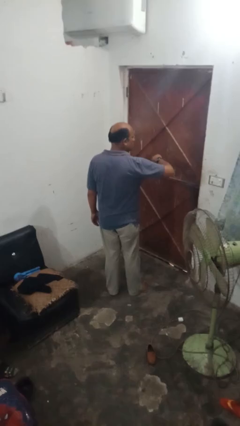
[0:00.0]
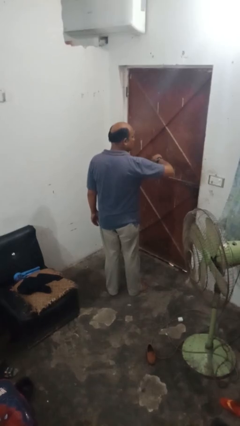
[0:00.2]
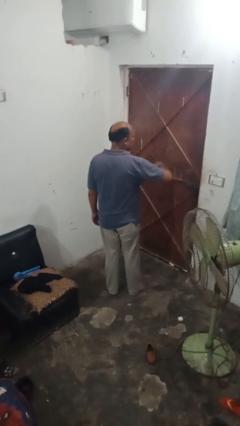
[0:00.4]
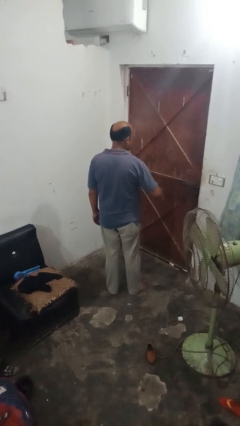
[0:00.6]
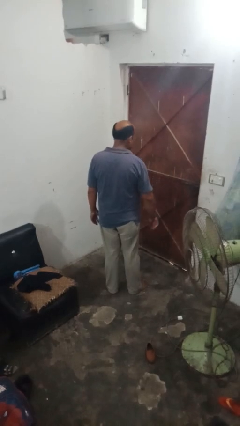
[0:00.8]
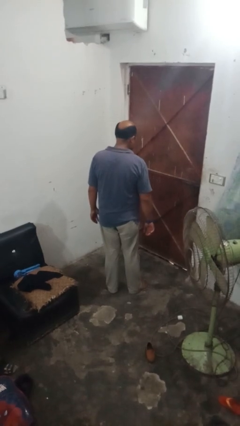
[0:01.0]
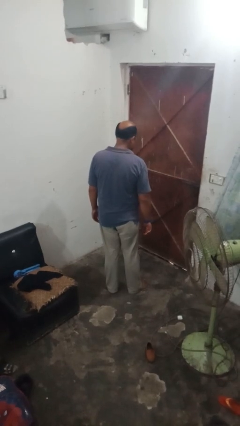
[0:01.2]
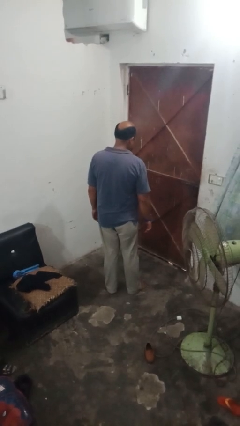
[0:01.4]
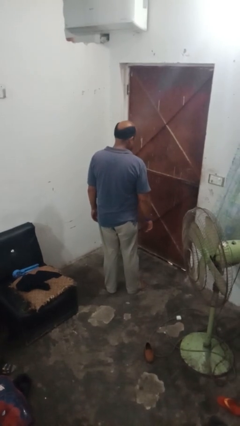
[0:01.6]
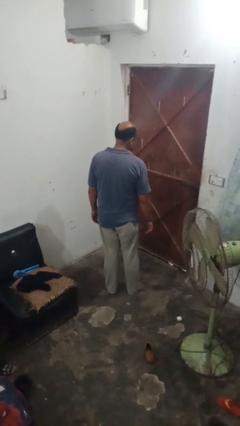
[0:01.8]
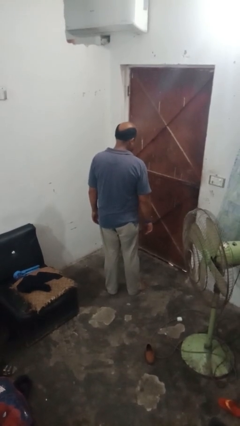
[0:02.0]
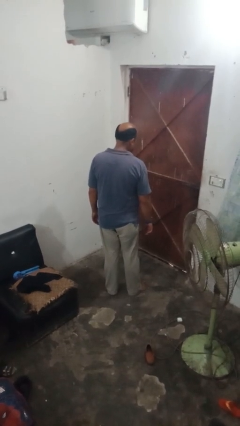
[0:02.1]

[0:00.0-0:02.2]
person takes off wristwatch

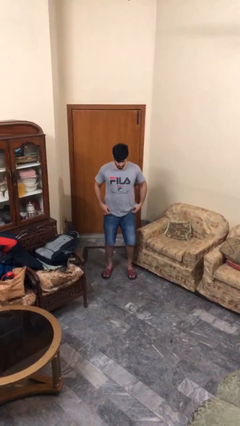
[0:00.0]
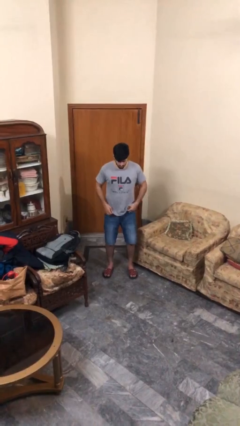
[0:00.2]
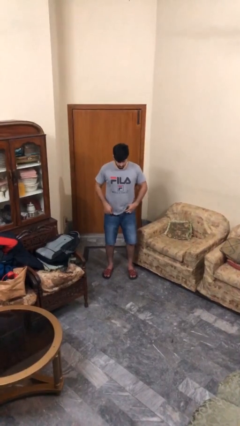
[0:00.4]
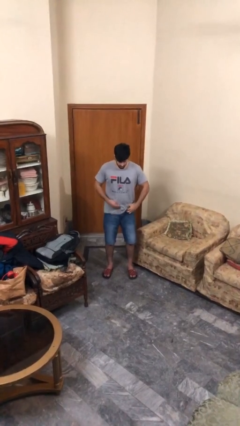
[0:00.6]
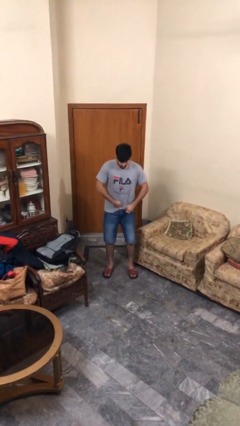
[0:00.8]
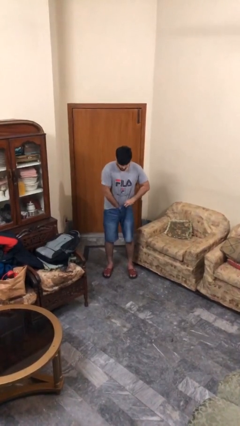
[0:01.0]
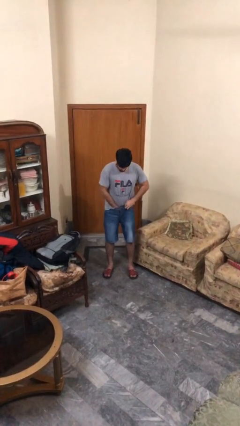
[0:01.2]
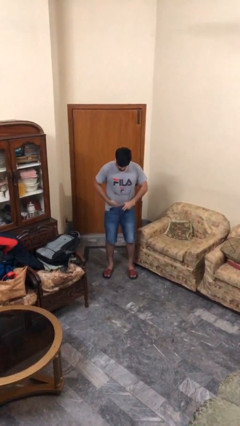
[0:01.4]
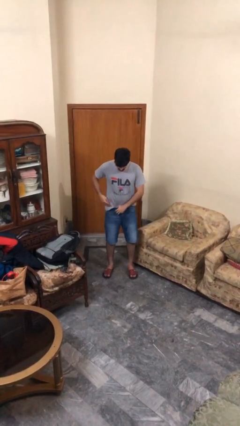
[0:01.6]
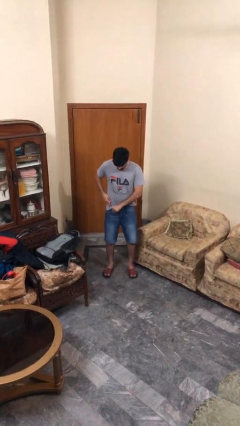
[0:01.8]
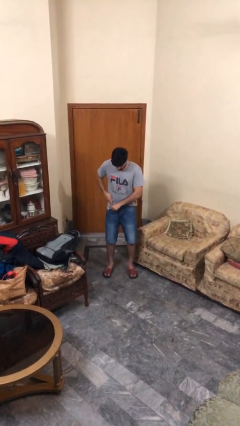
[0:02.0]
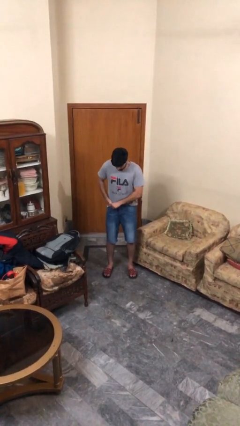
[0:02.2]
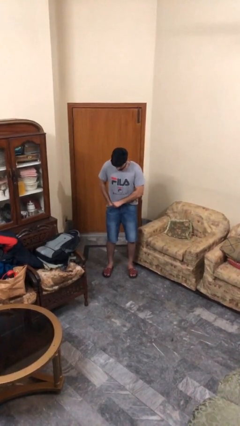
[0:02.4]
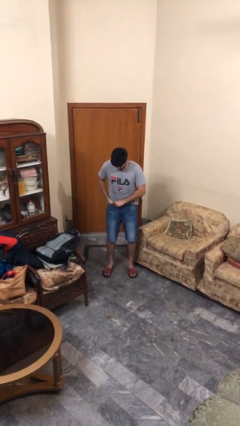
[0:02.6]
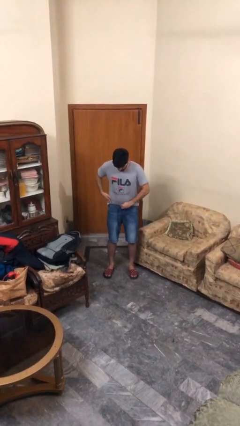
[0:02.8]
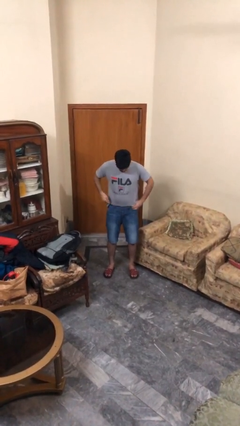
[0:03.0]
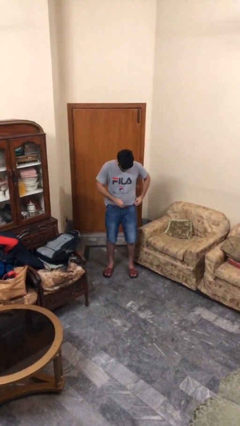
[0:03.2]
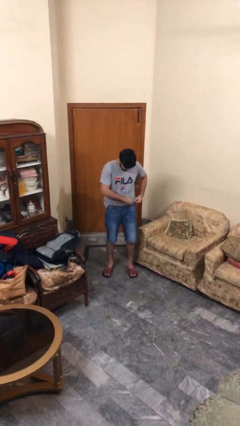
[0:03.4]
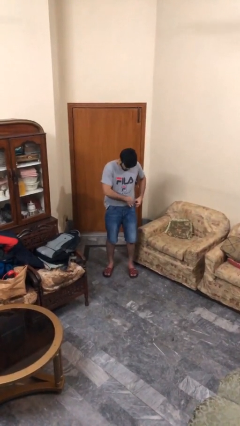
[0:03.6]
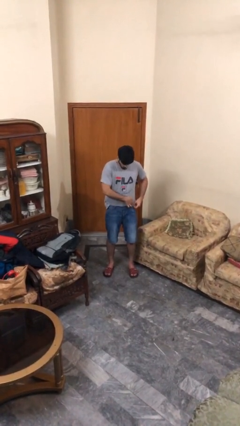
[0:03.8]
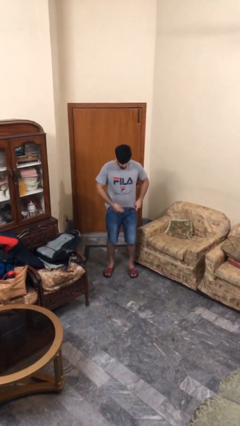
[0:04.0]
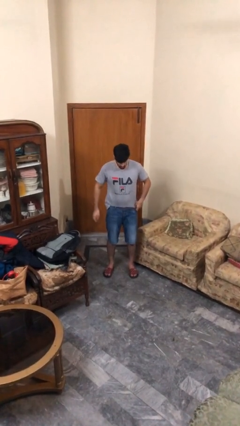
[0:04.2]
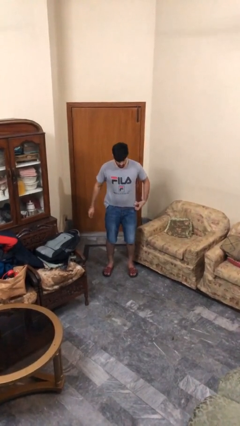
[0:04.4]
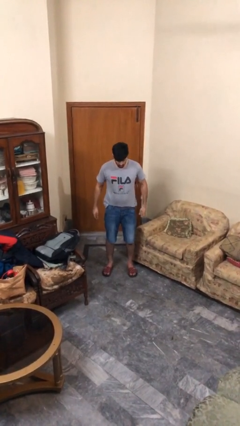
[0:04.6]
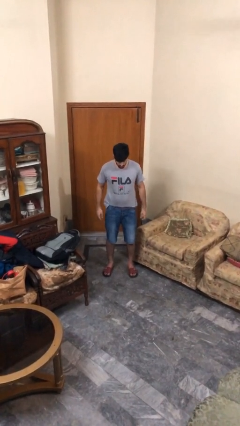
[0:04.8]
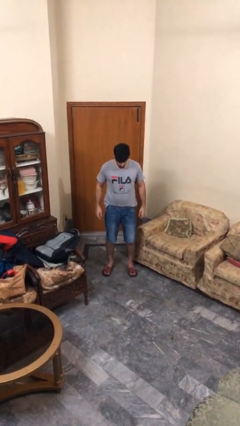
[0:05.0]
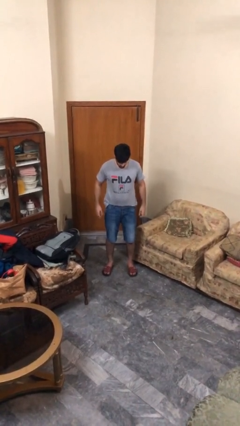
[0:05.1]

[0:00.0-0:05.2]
person tucks in shirt

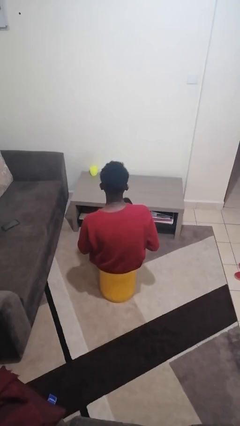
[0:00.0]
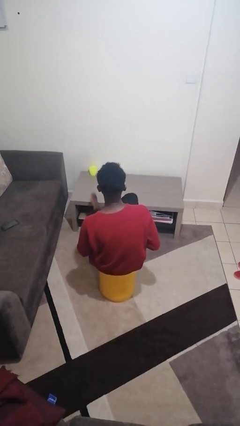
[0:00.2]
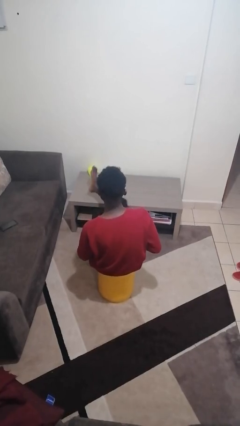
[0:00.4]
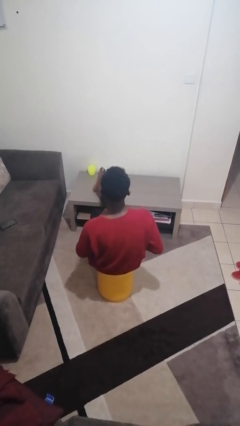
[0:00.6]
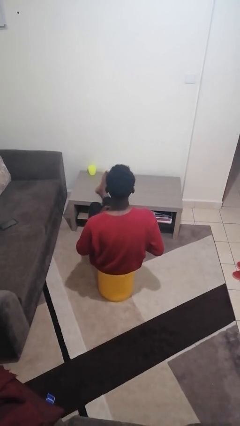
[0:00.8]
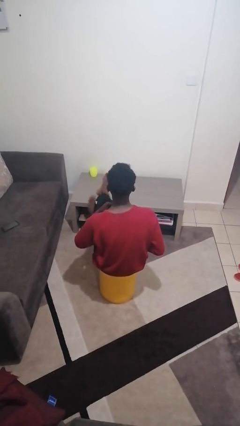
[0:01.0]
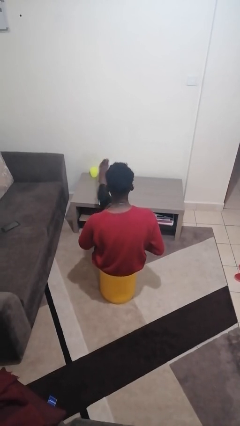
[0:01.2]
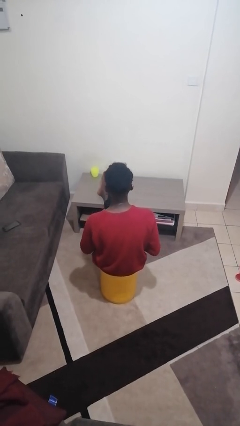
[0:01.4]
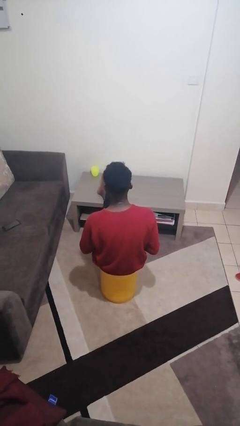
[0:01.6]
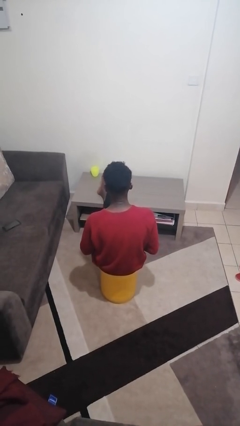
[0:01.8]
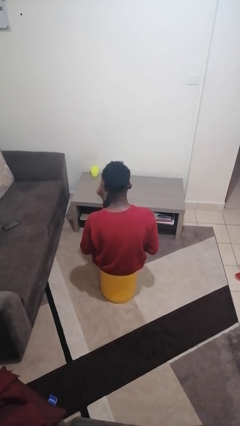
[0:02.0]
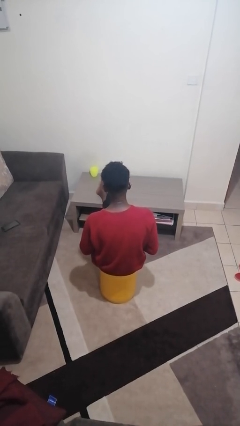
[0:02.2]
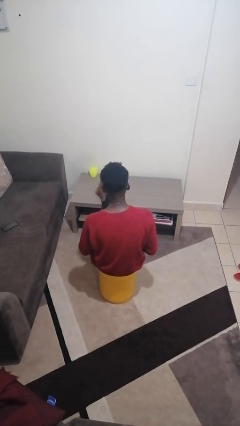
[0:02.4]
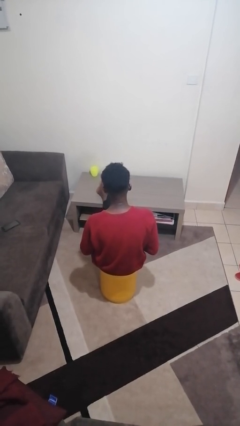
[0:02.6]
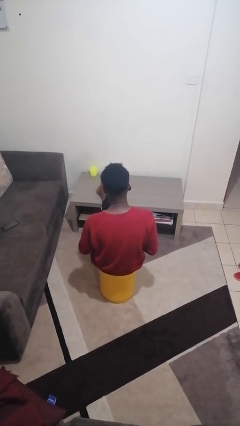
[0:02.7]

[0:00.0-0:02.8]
person puts feet up

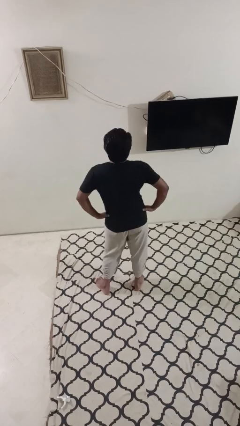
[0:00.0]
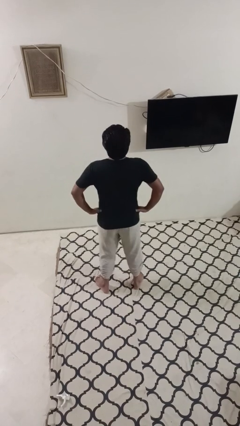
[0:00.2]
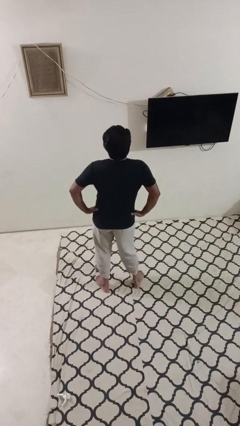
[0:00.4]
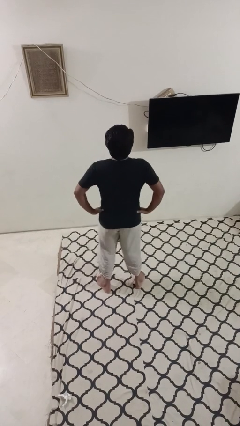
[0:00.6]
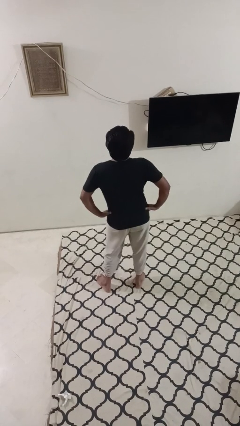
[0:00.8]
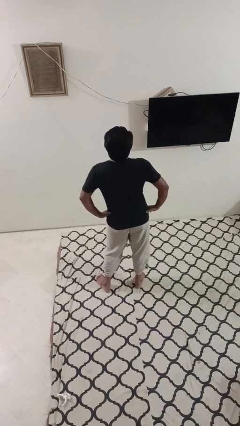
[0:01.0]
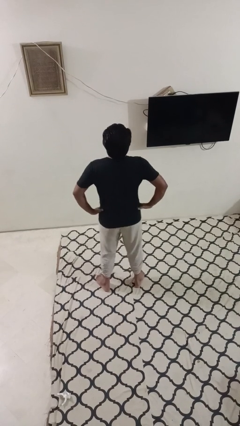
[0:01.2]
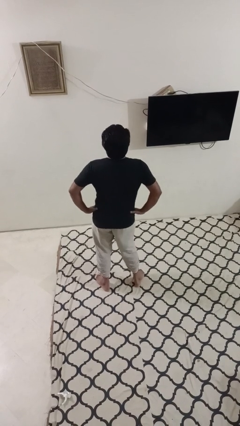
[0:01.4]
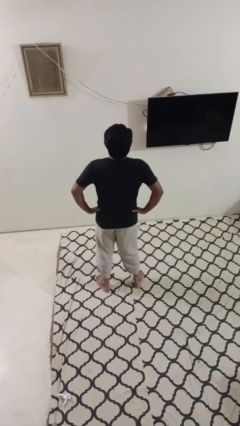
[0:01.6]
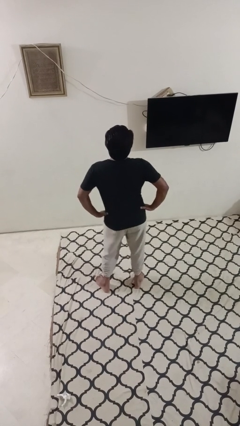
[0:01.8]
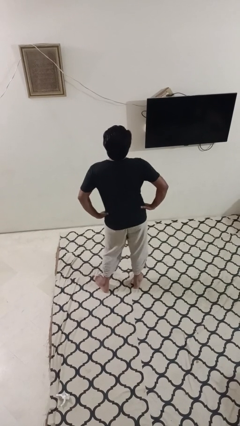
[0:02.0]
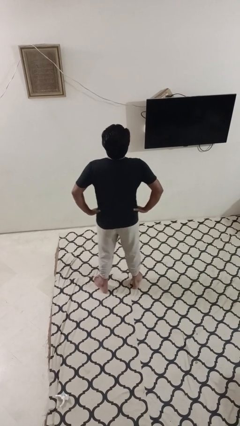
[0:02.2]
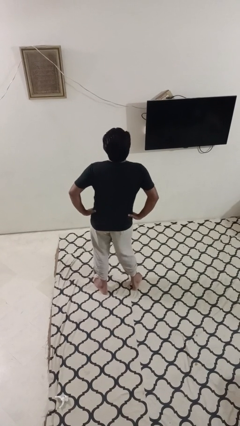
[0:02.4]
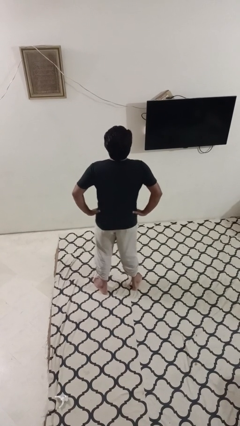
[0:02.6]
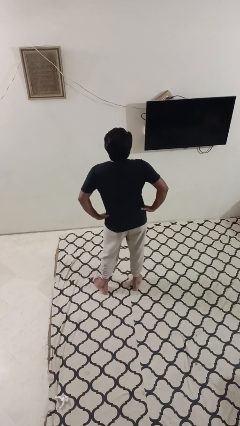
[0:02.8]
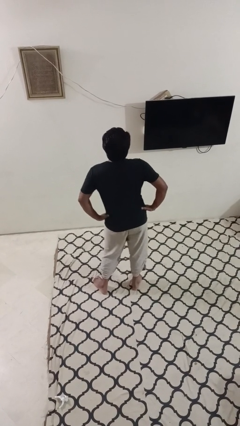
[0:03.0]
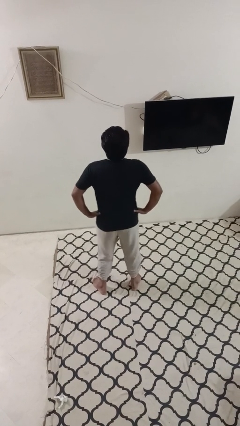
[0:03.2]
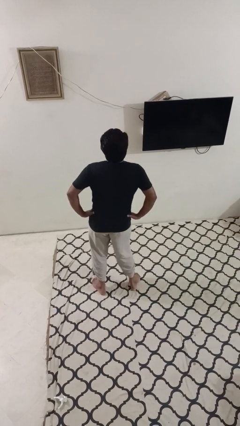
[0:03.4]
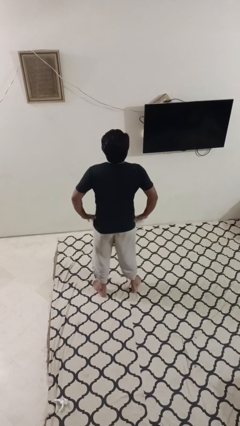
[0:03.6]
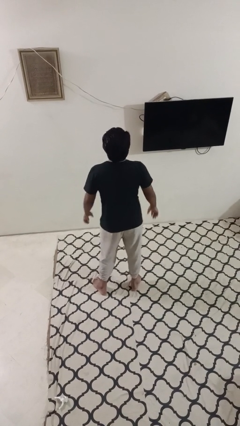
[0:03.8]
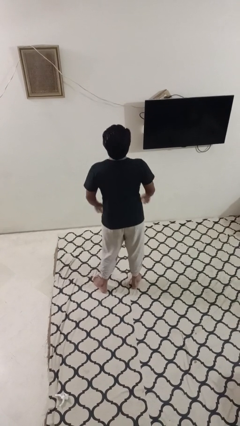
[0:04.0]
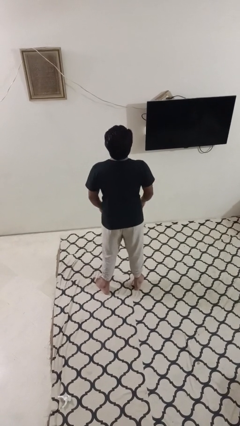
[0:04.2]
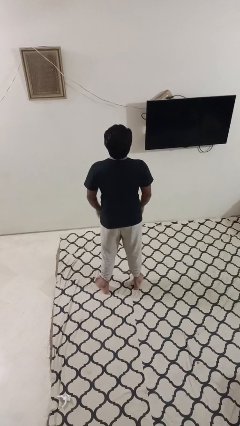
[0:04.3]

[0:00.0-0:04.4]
person wiggles hips

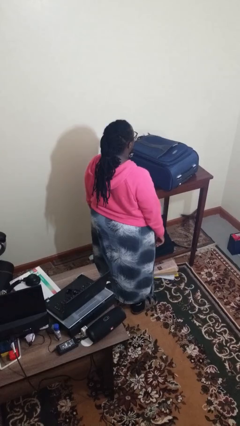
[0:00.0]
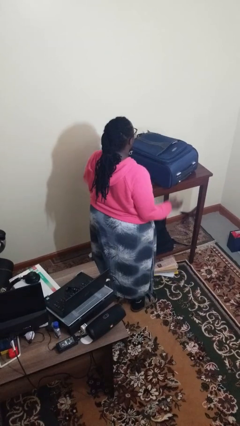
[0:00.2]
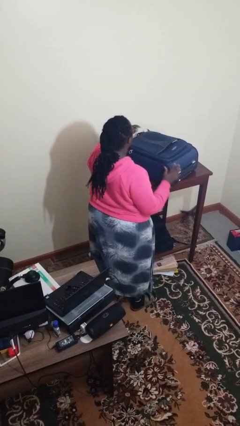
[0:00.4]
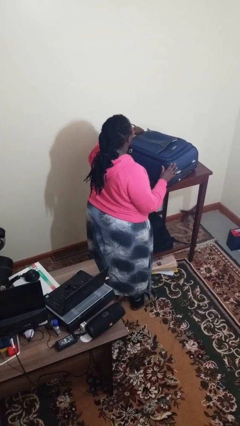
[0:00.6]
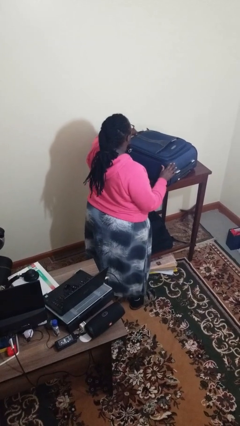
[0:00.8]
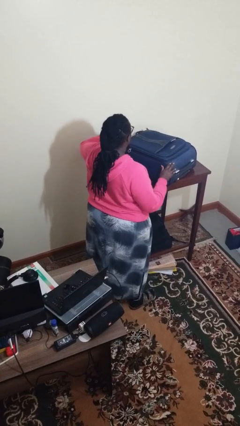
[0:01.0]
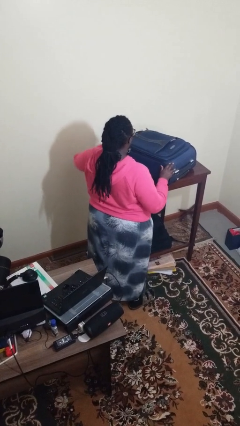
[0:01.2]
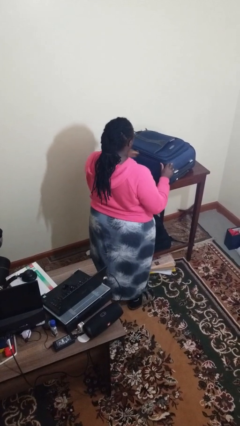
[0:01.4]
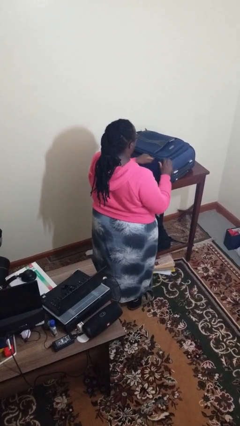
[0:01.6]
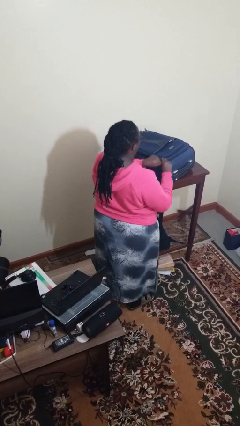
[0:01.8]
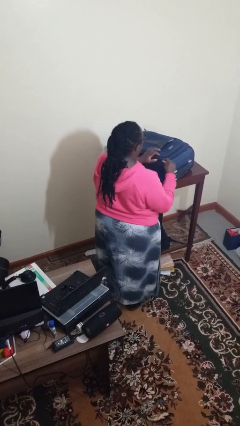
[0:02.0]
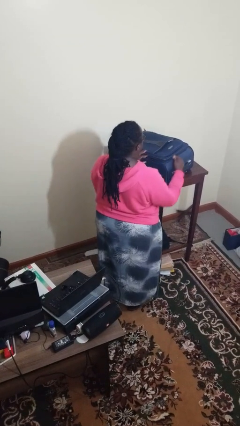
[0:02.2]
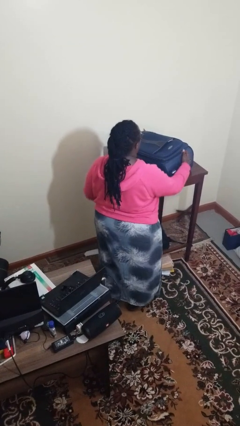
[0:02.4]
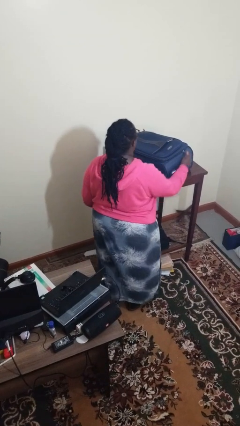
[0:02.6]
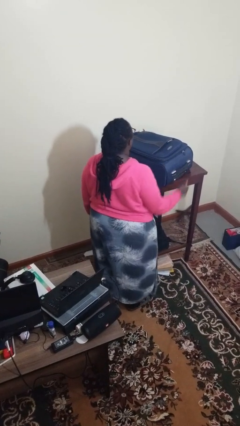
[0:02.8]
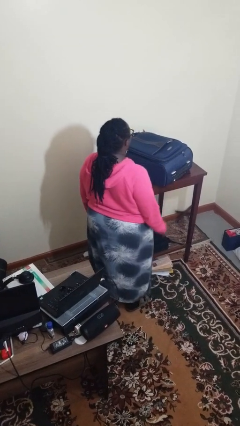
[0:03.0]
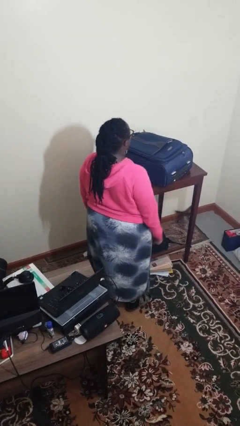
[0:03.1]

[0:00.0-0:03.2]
person opens suitcase
